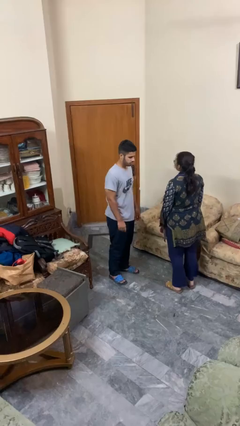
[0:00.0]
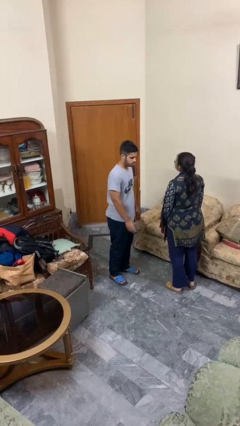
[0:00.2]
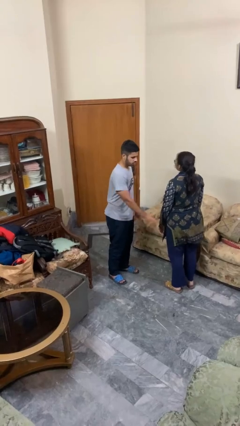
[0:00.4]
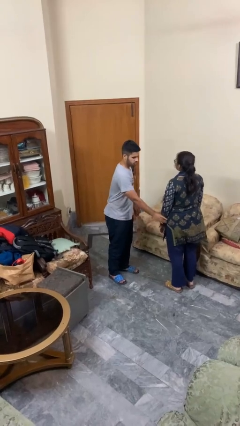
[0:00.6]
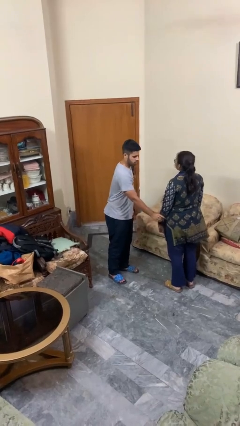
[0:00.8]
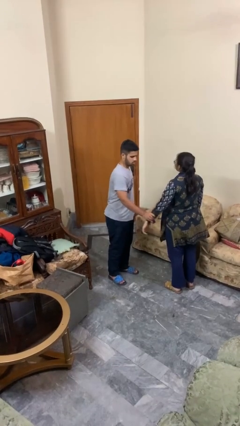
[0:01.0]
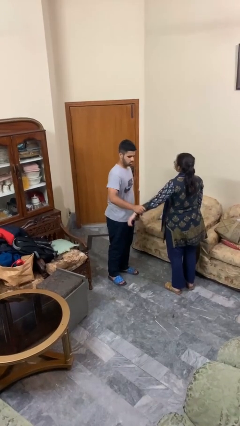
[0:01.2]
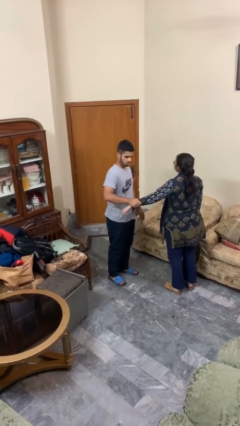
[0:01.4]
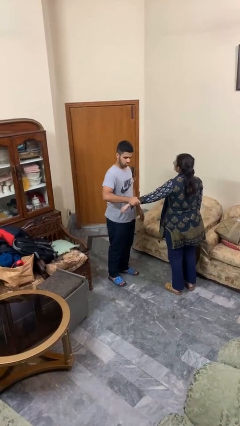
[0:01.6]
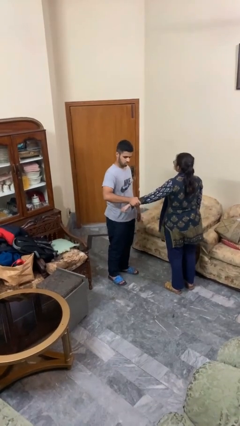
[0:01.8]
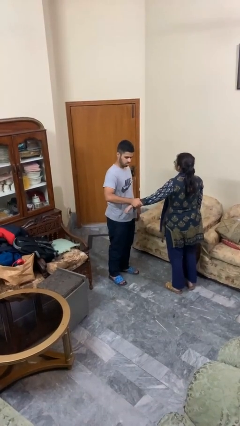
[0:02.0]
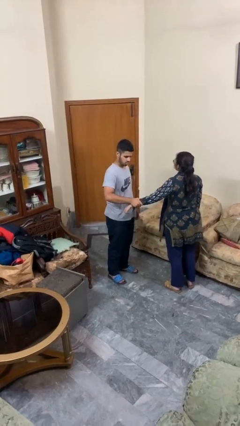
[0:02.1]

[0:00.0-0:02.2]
person grabs person by forearm

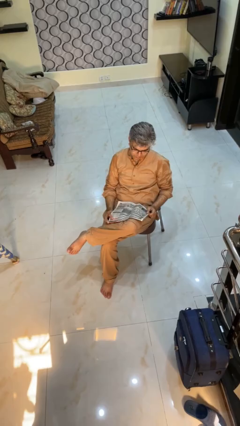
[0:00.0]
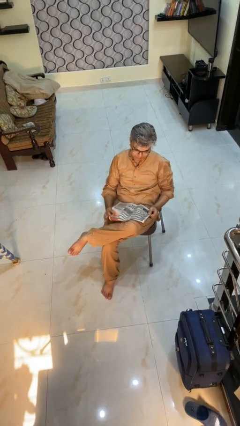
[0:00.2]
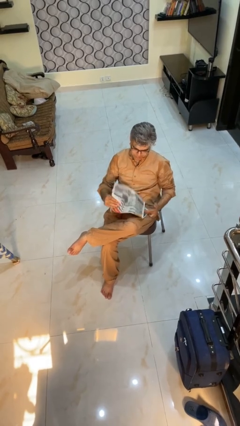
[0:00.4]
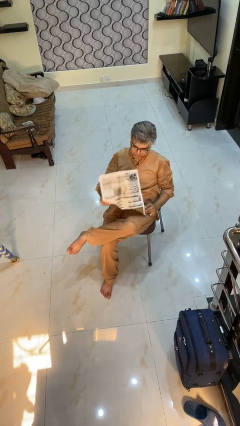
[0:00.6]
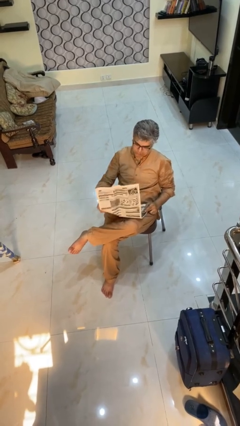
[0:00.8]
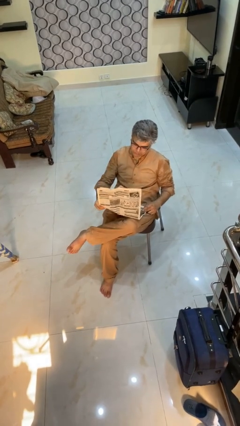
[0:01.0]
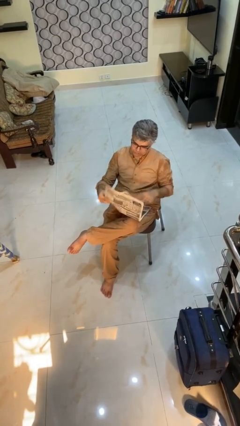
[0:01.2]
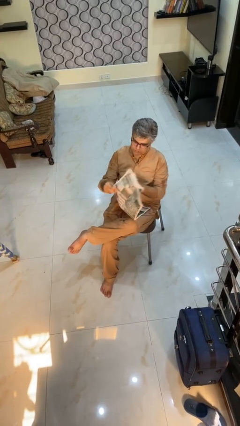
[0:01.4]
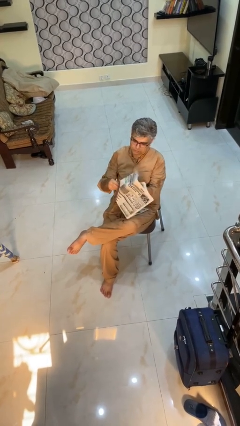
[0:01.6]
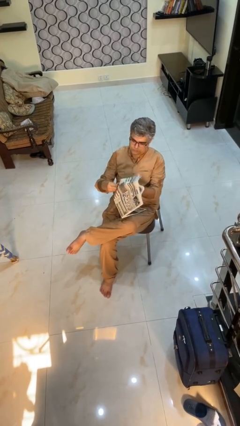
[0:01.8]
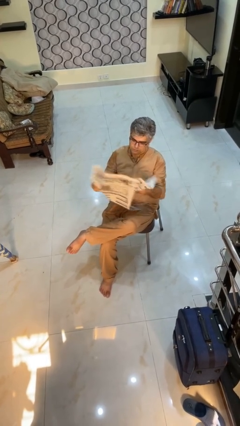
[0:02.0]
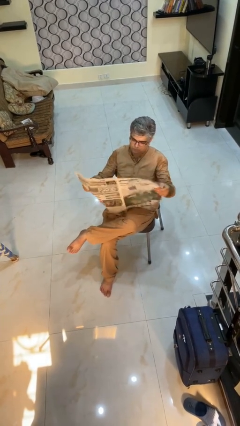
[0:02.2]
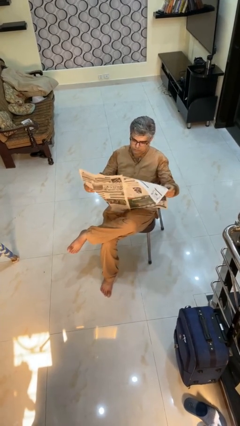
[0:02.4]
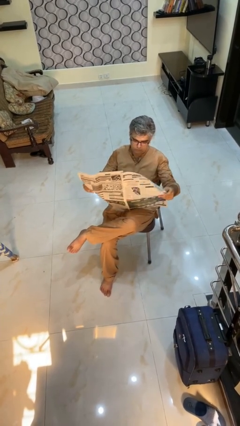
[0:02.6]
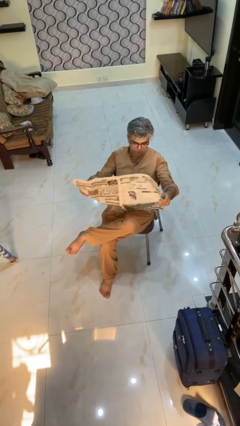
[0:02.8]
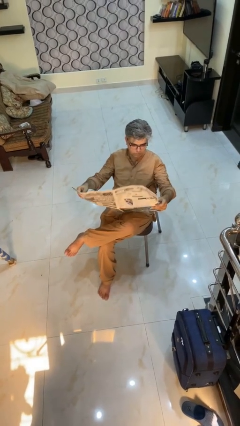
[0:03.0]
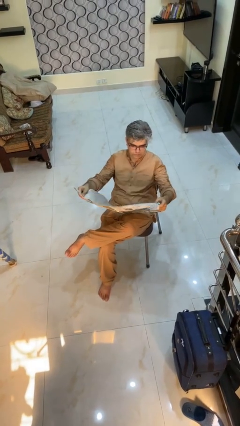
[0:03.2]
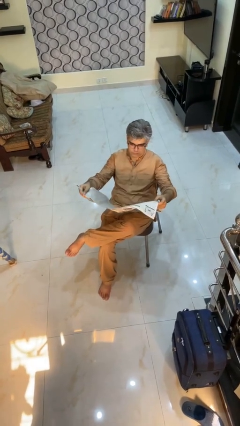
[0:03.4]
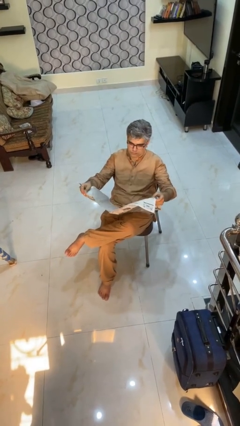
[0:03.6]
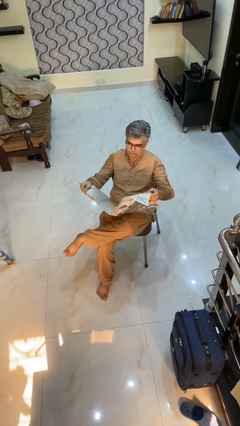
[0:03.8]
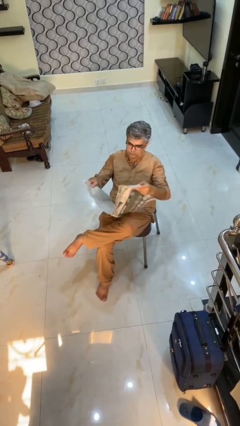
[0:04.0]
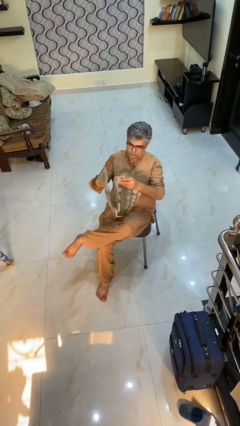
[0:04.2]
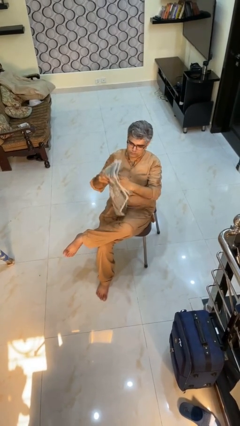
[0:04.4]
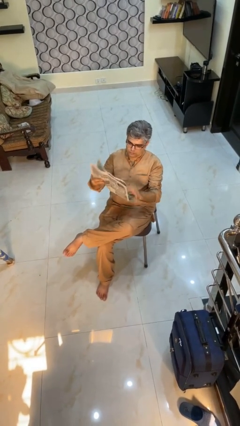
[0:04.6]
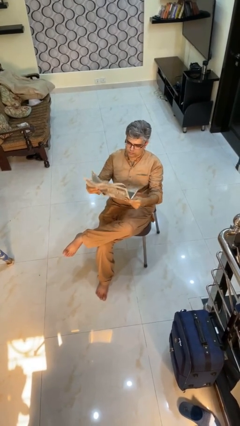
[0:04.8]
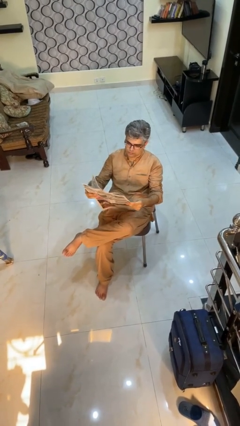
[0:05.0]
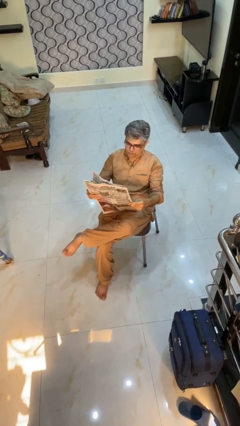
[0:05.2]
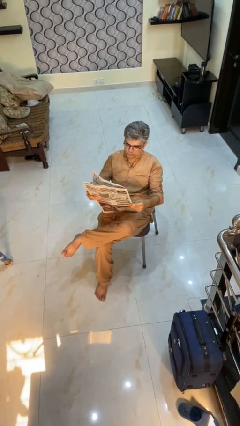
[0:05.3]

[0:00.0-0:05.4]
person reads newspaper

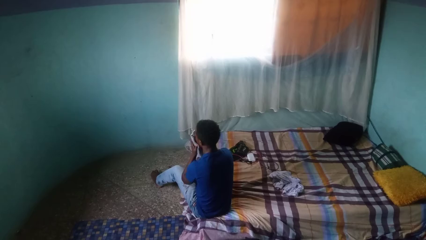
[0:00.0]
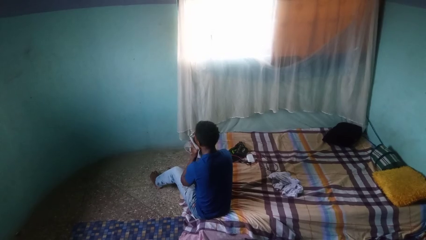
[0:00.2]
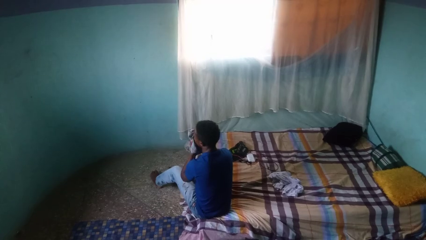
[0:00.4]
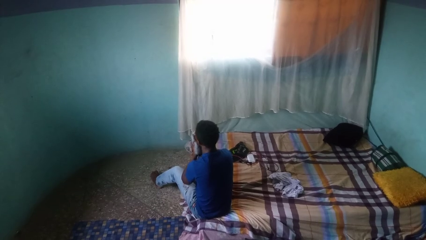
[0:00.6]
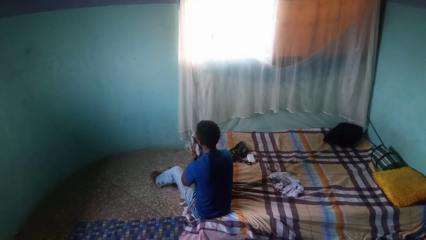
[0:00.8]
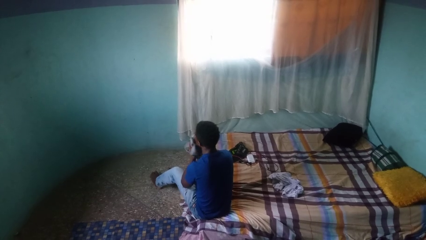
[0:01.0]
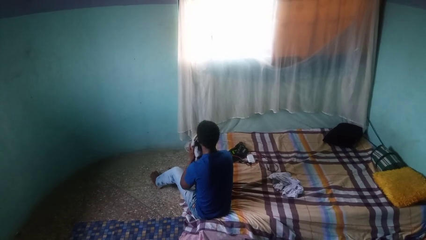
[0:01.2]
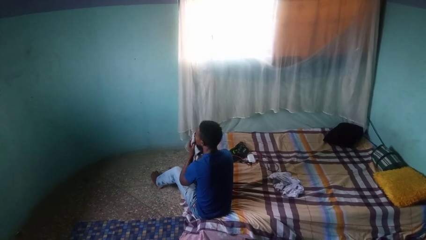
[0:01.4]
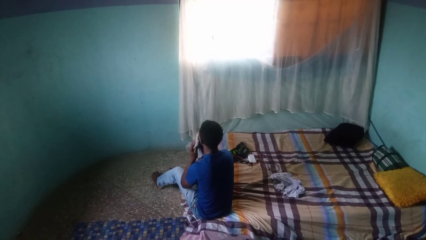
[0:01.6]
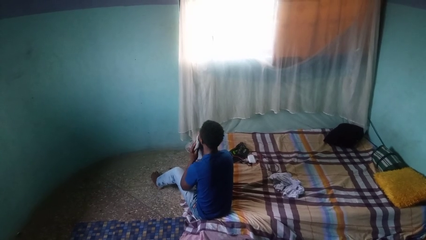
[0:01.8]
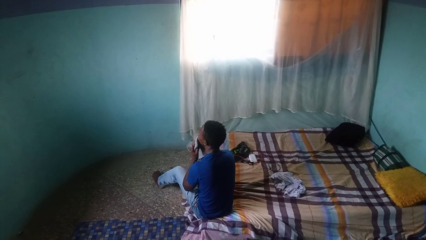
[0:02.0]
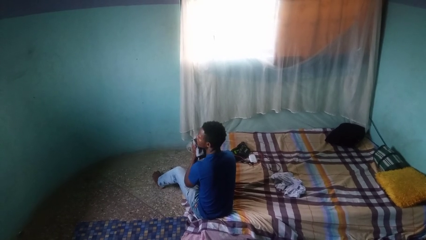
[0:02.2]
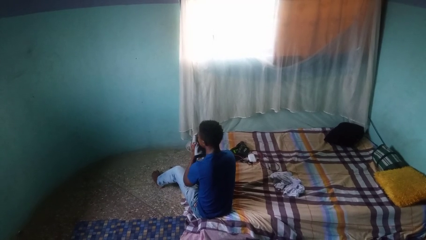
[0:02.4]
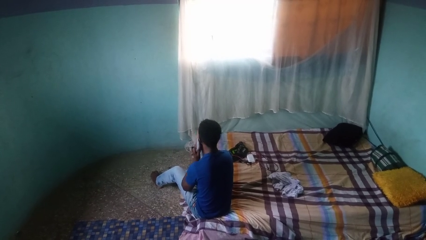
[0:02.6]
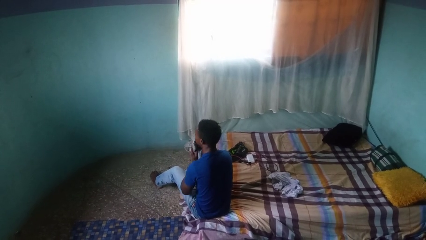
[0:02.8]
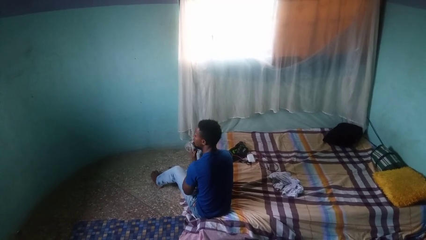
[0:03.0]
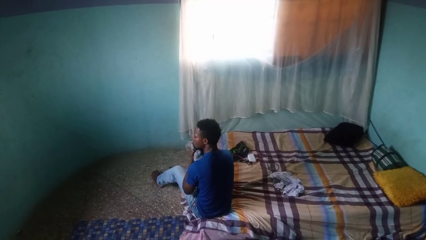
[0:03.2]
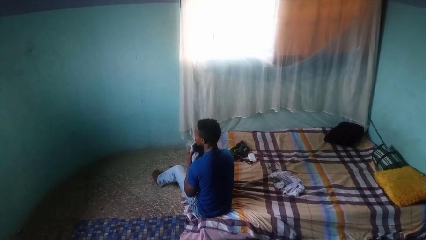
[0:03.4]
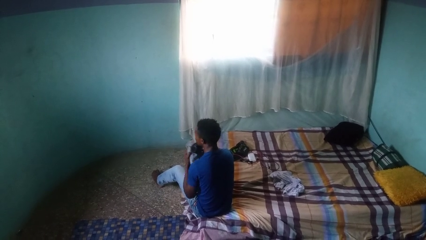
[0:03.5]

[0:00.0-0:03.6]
person wipes mouth with napkin

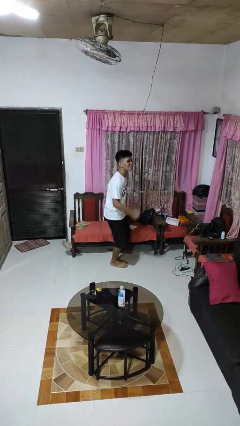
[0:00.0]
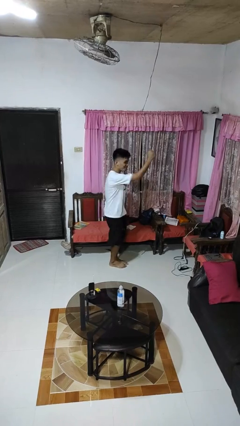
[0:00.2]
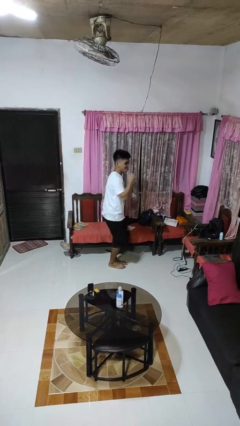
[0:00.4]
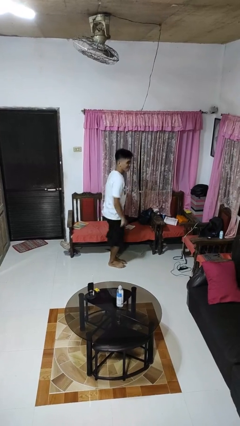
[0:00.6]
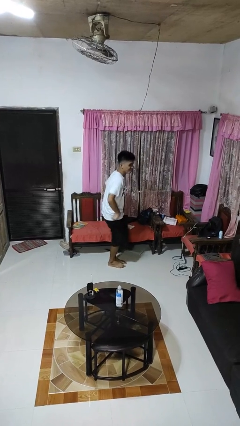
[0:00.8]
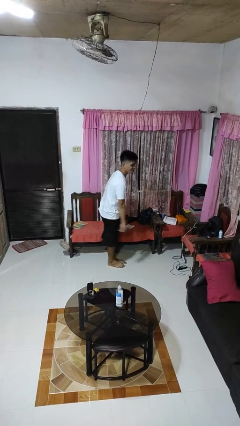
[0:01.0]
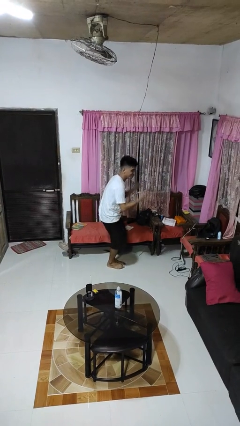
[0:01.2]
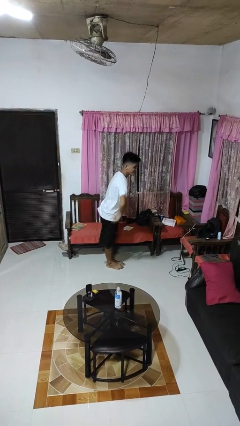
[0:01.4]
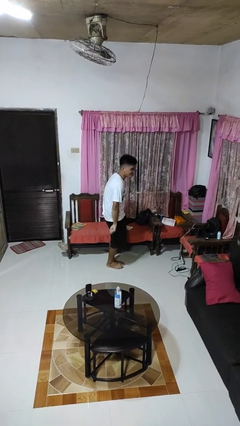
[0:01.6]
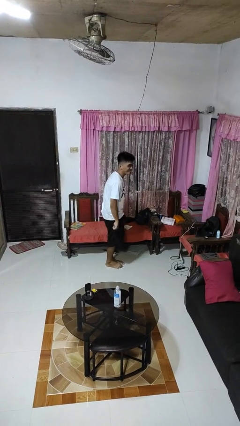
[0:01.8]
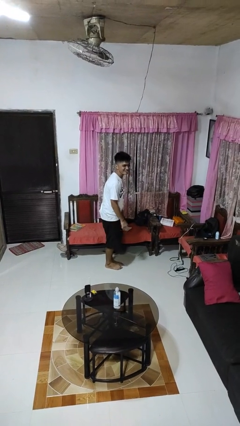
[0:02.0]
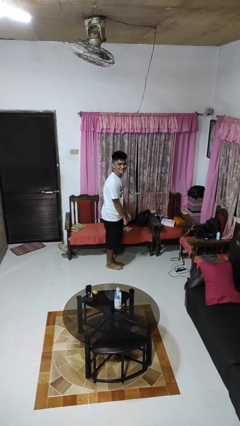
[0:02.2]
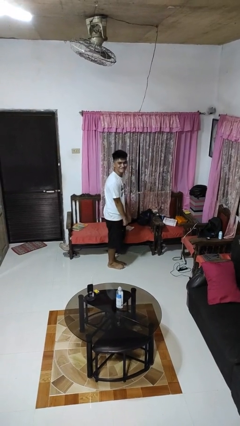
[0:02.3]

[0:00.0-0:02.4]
person dances in place

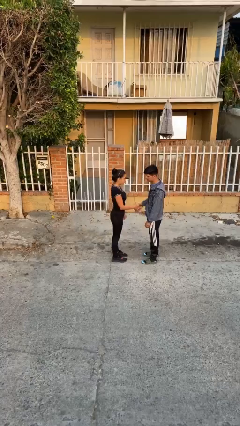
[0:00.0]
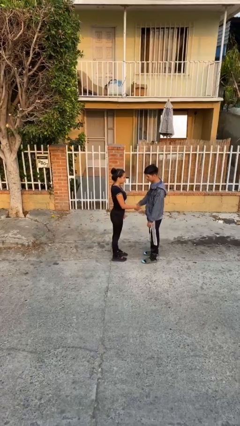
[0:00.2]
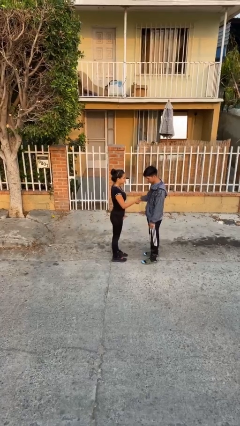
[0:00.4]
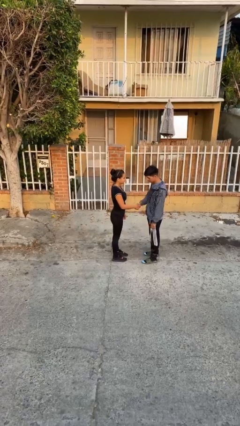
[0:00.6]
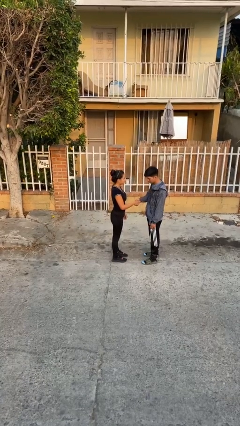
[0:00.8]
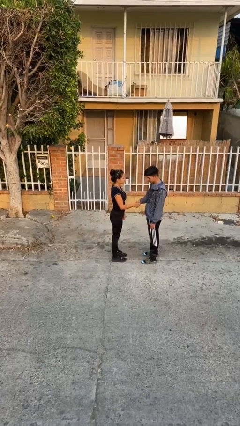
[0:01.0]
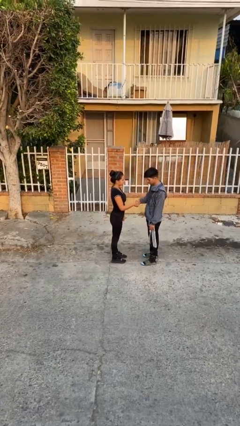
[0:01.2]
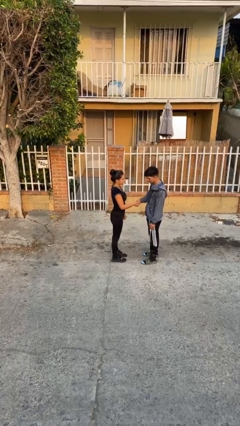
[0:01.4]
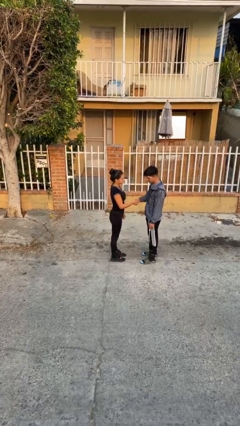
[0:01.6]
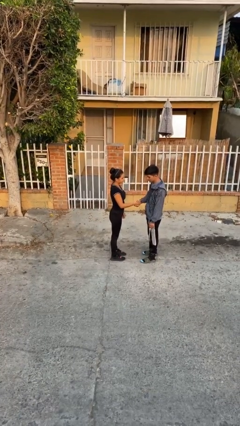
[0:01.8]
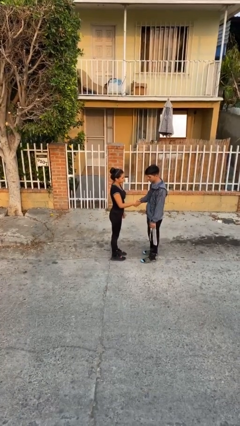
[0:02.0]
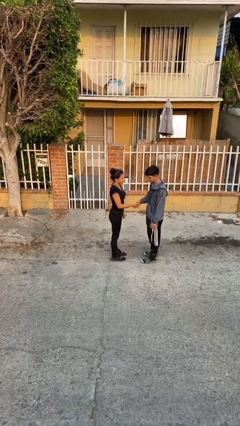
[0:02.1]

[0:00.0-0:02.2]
person shakes hand

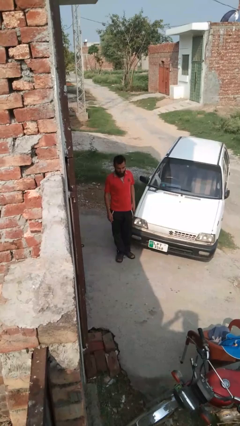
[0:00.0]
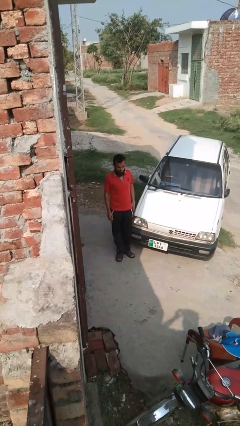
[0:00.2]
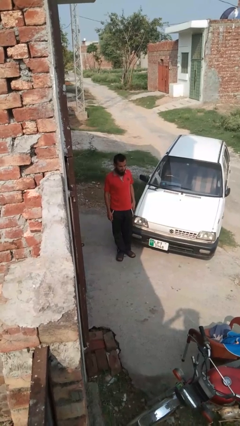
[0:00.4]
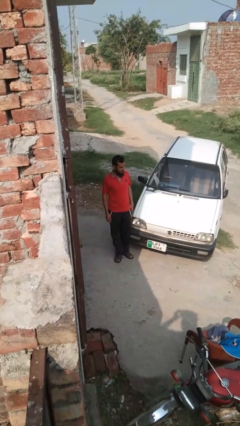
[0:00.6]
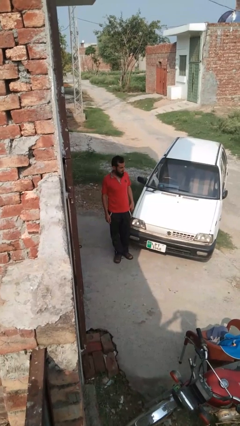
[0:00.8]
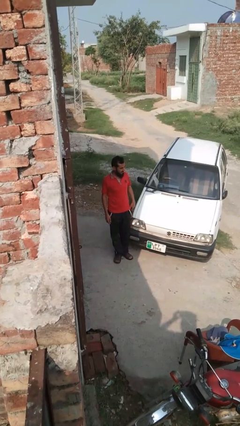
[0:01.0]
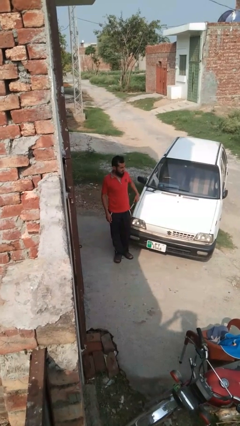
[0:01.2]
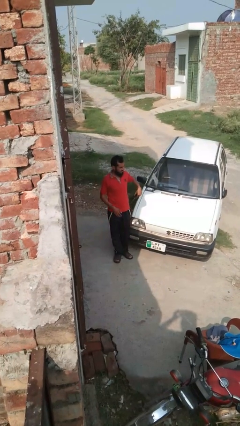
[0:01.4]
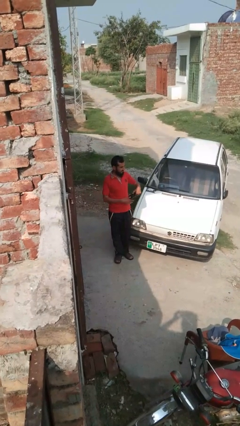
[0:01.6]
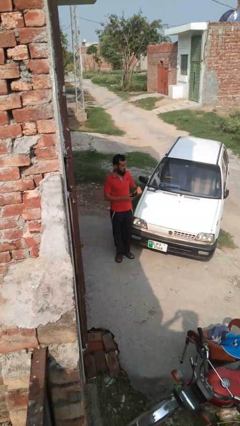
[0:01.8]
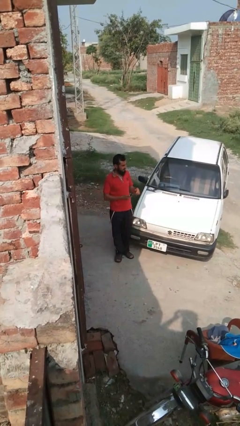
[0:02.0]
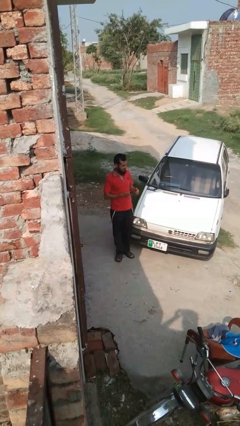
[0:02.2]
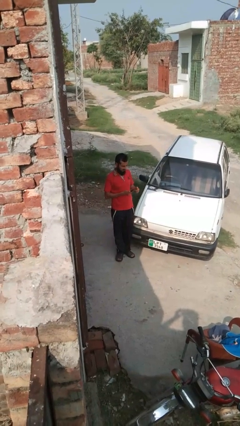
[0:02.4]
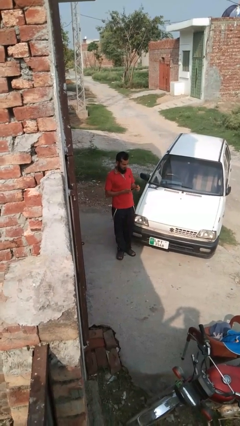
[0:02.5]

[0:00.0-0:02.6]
person takes phone from pocket
